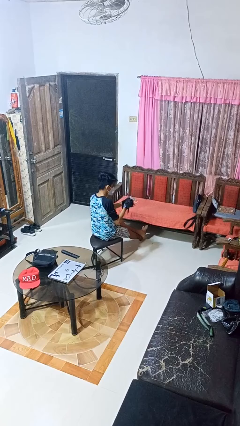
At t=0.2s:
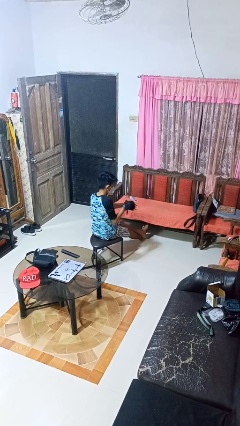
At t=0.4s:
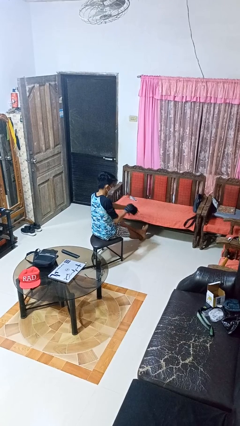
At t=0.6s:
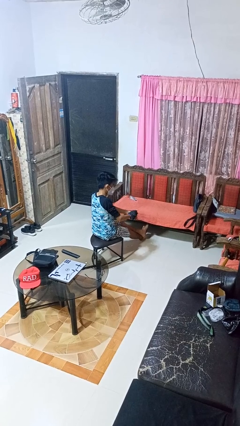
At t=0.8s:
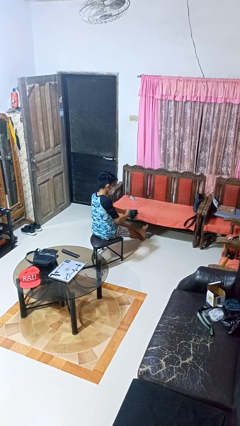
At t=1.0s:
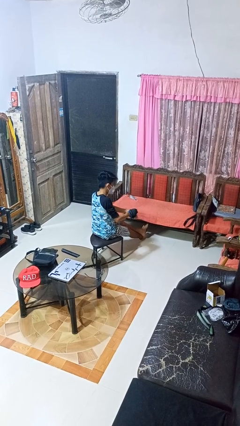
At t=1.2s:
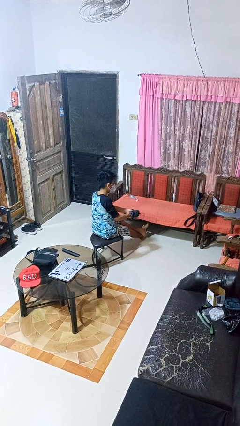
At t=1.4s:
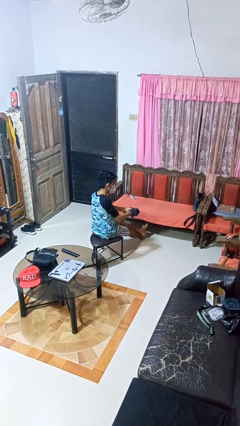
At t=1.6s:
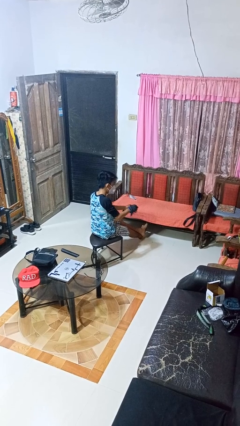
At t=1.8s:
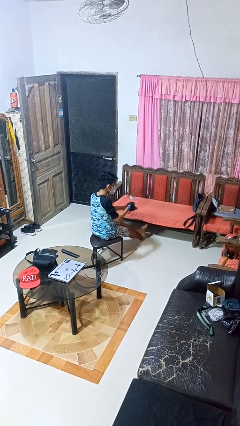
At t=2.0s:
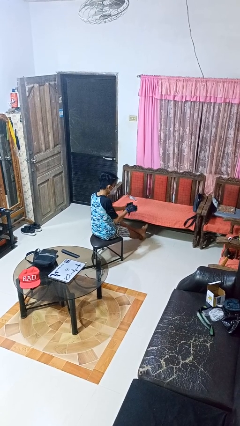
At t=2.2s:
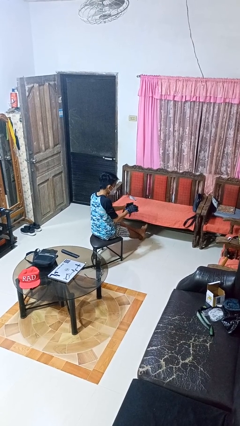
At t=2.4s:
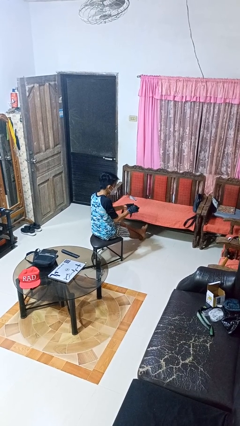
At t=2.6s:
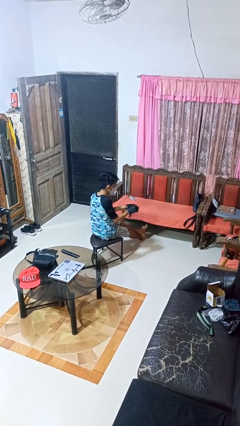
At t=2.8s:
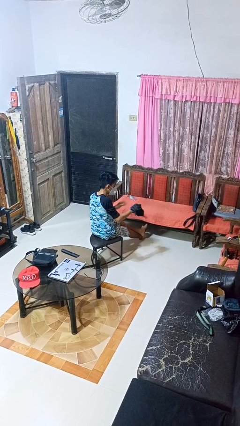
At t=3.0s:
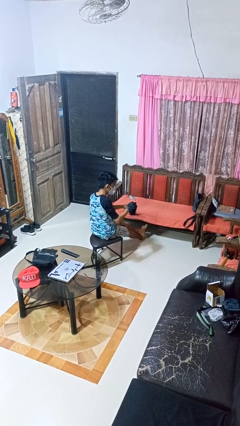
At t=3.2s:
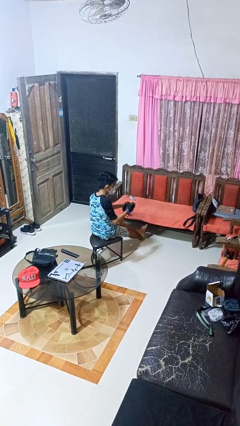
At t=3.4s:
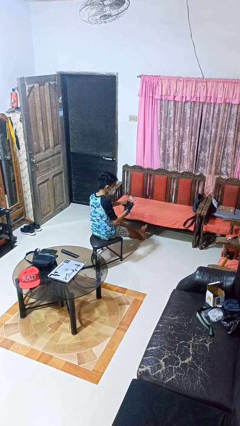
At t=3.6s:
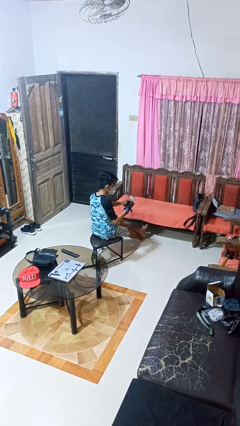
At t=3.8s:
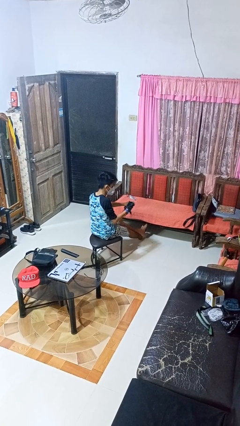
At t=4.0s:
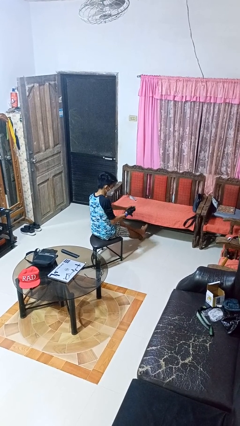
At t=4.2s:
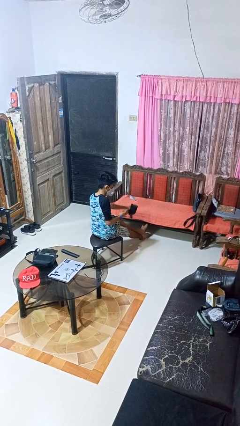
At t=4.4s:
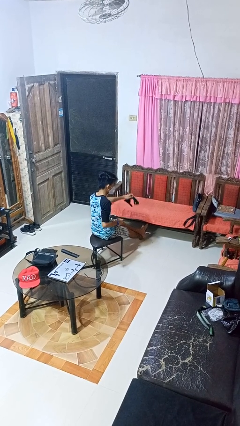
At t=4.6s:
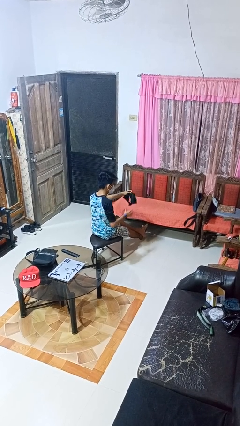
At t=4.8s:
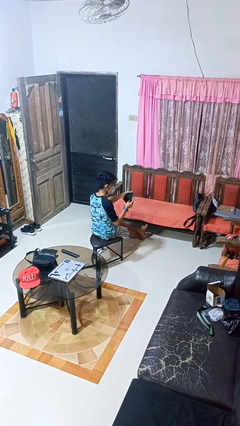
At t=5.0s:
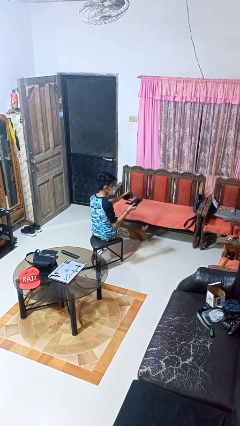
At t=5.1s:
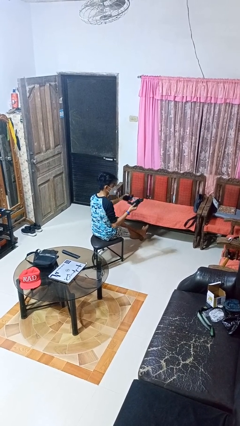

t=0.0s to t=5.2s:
person takes off gloves

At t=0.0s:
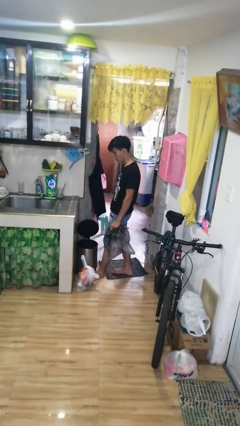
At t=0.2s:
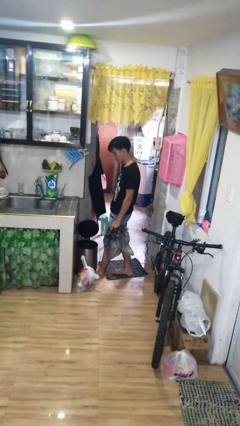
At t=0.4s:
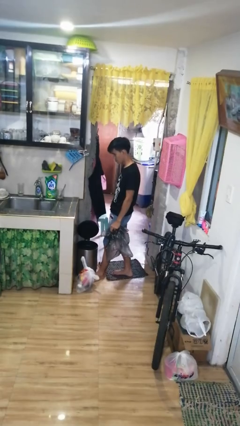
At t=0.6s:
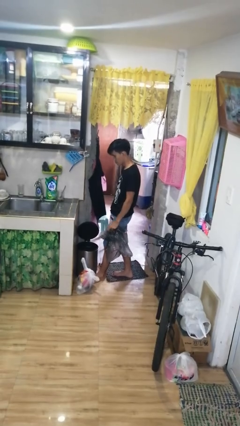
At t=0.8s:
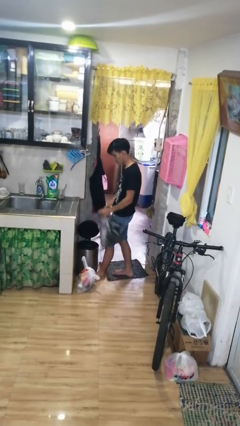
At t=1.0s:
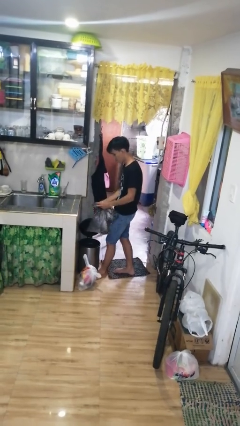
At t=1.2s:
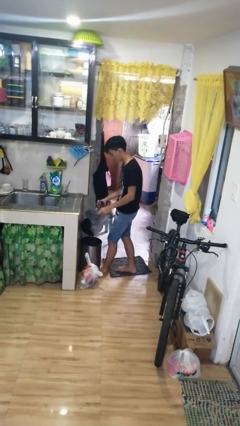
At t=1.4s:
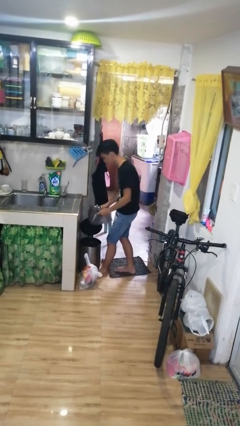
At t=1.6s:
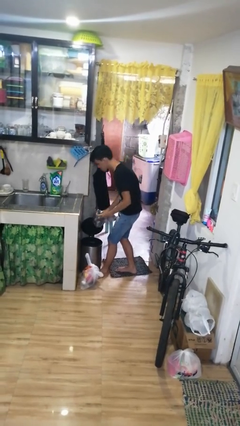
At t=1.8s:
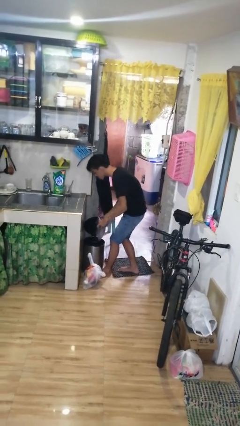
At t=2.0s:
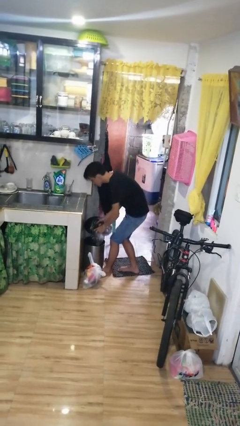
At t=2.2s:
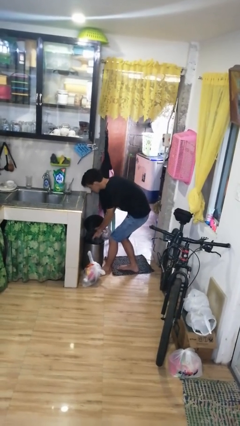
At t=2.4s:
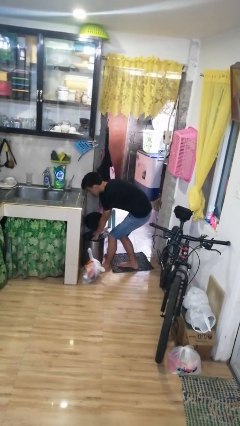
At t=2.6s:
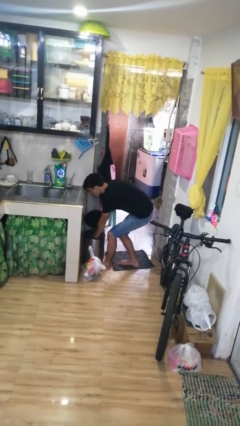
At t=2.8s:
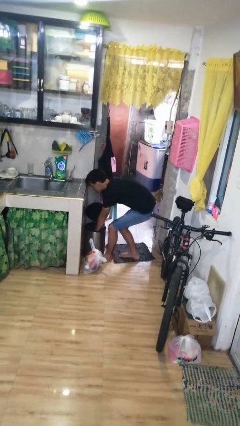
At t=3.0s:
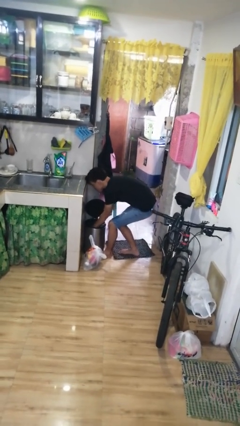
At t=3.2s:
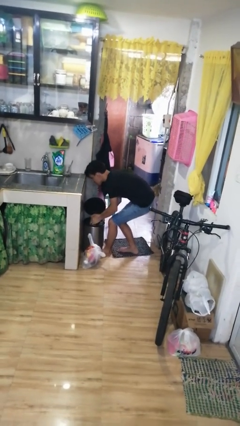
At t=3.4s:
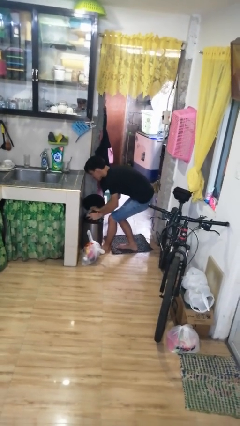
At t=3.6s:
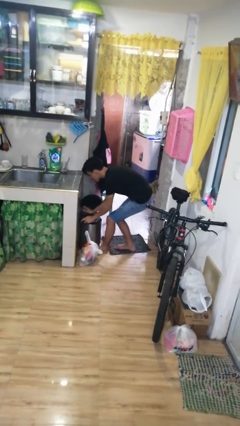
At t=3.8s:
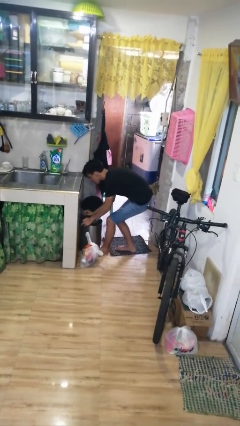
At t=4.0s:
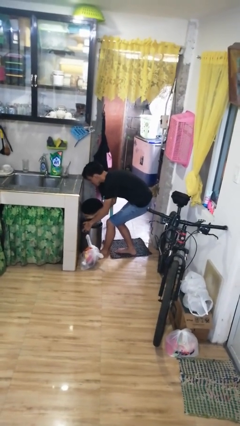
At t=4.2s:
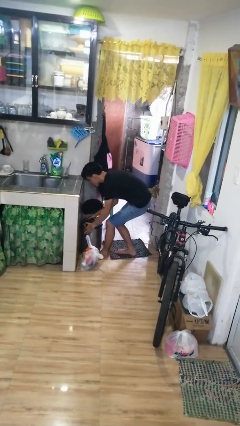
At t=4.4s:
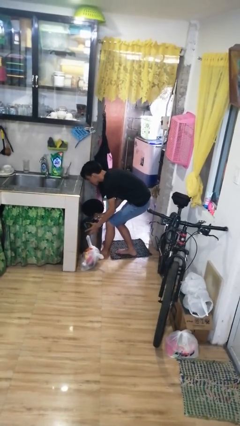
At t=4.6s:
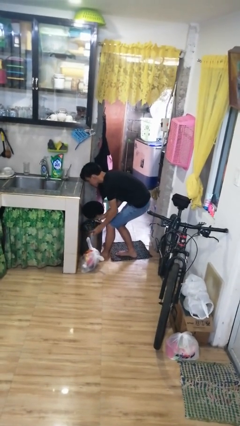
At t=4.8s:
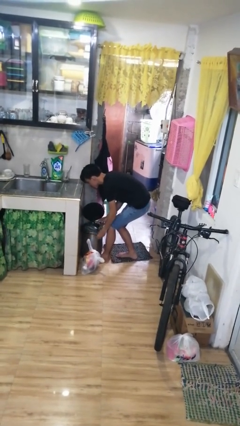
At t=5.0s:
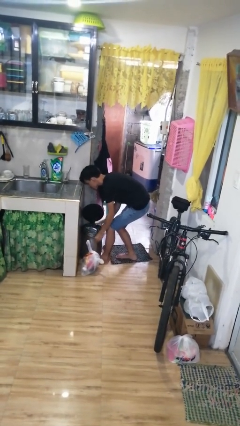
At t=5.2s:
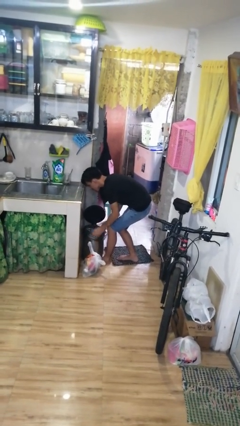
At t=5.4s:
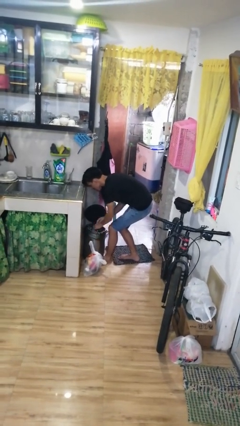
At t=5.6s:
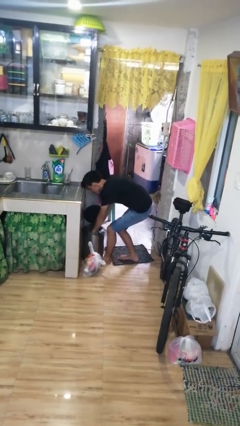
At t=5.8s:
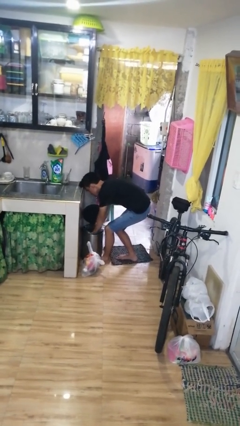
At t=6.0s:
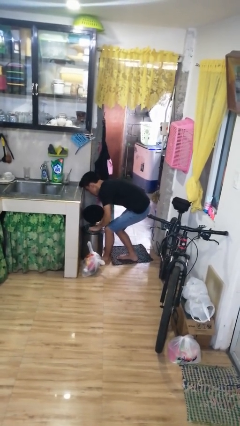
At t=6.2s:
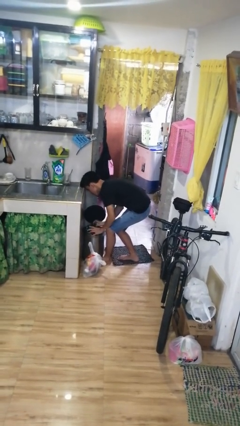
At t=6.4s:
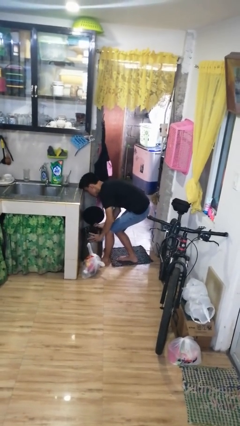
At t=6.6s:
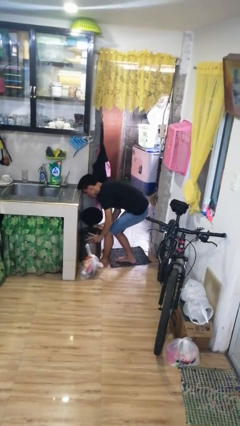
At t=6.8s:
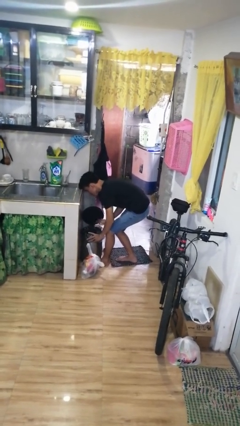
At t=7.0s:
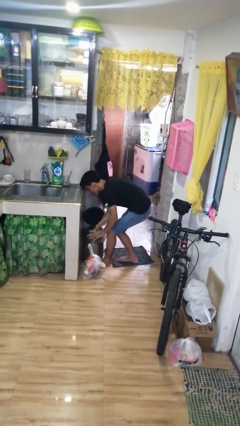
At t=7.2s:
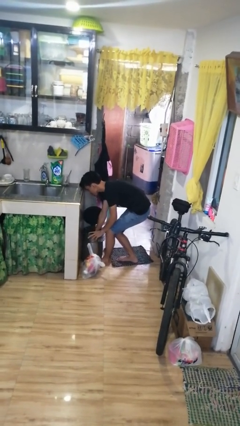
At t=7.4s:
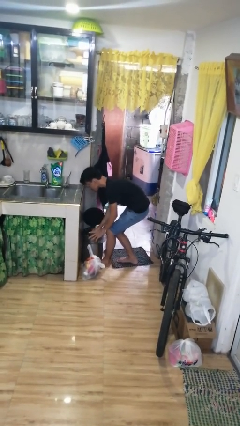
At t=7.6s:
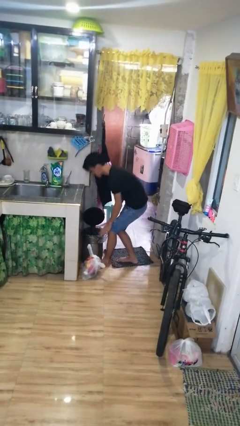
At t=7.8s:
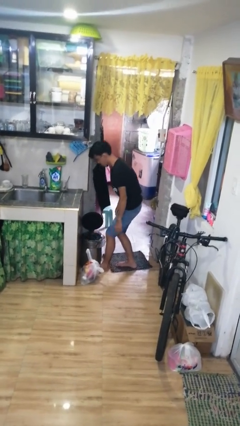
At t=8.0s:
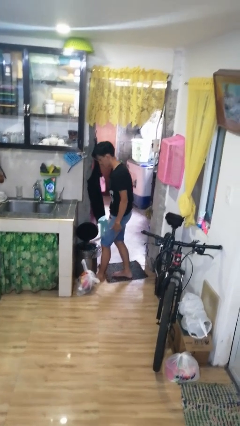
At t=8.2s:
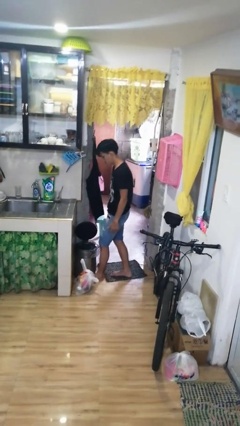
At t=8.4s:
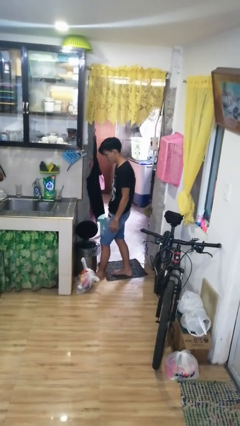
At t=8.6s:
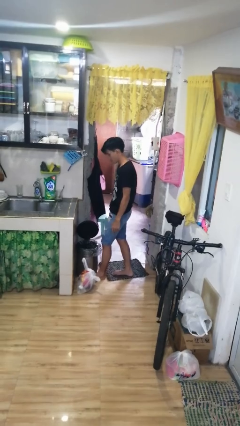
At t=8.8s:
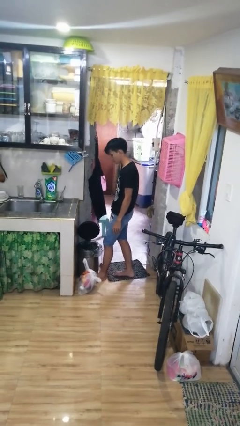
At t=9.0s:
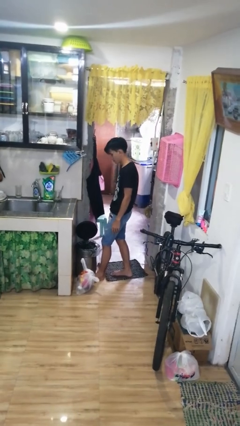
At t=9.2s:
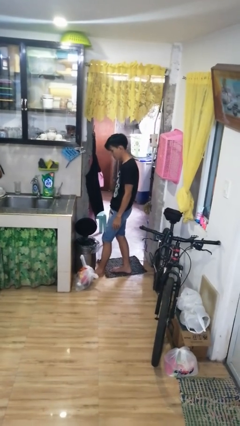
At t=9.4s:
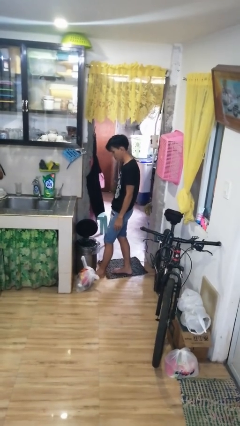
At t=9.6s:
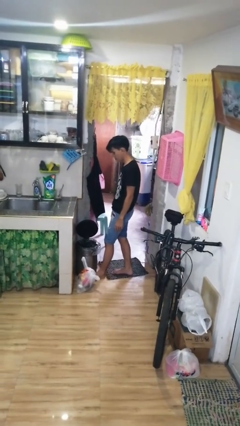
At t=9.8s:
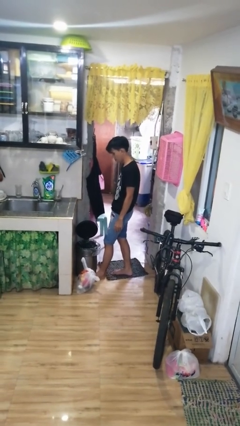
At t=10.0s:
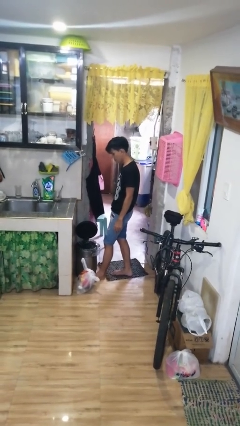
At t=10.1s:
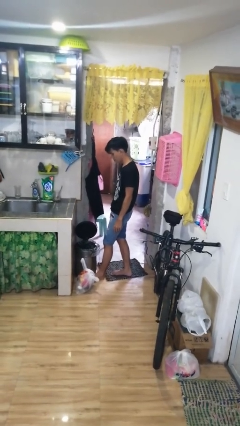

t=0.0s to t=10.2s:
person inserts trashbag into trashcan

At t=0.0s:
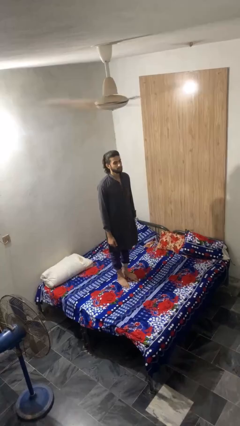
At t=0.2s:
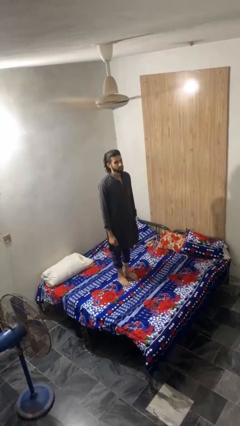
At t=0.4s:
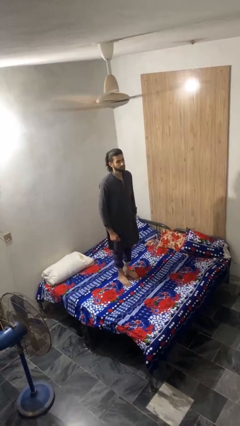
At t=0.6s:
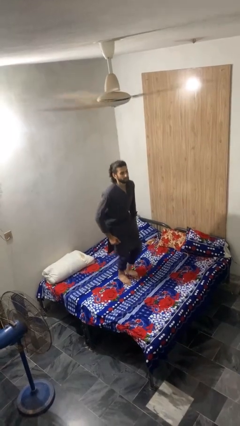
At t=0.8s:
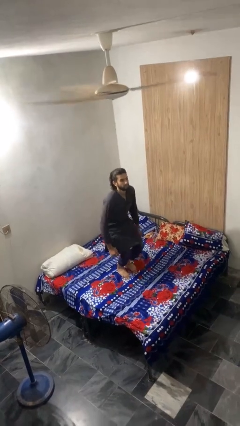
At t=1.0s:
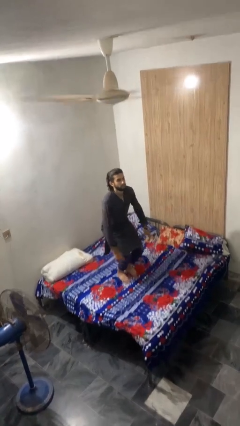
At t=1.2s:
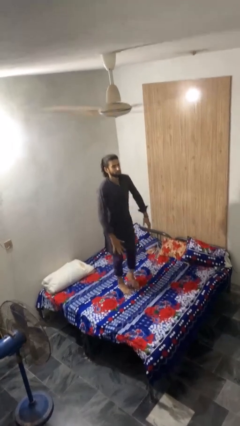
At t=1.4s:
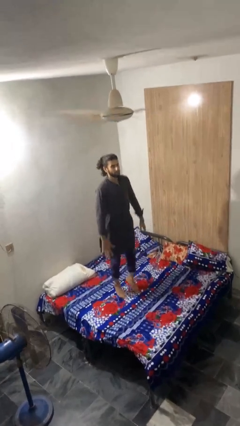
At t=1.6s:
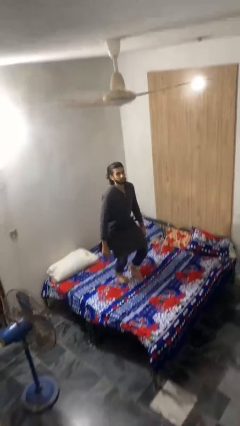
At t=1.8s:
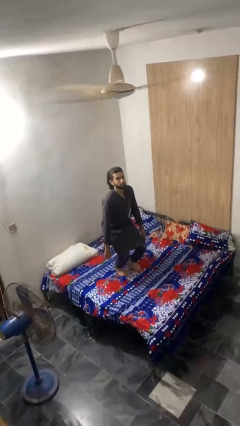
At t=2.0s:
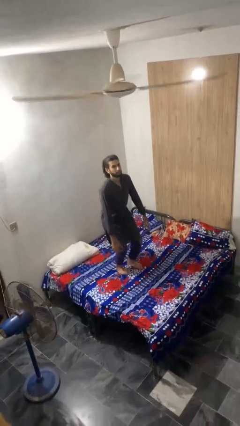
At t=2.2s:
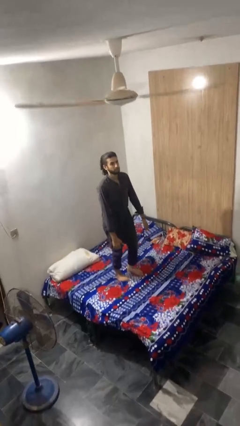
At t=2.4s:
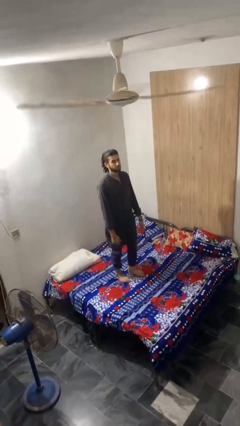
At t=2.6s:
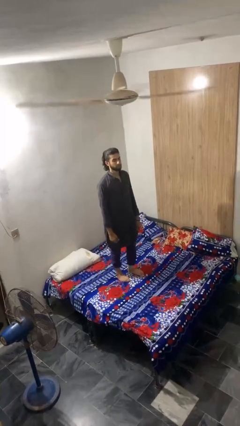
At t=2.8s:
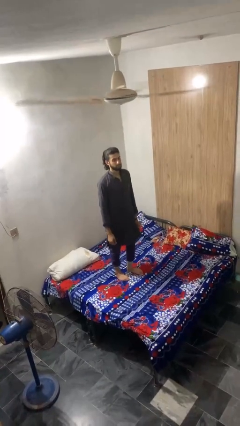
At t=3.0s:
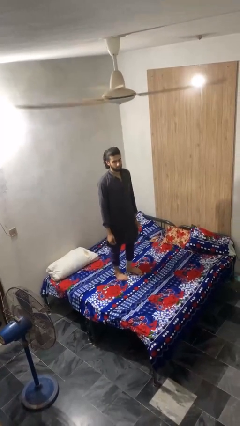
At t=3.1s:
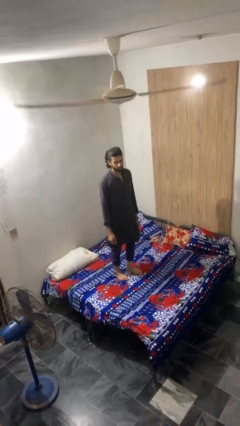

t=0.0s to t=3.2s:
person jumps on bed
